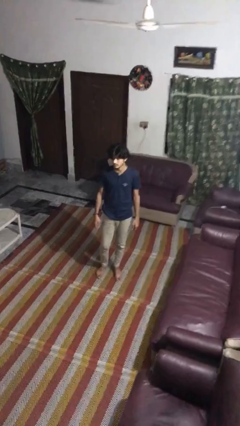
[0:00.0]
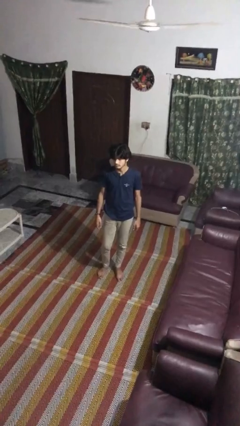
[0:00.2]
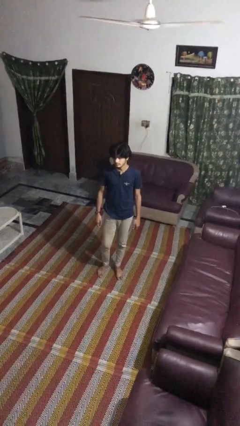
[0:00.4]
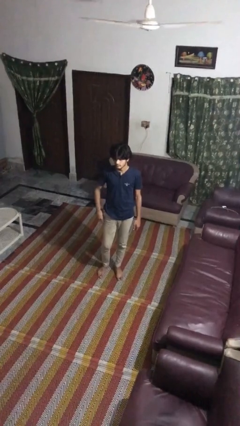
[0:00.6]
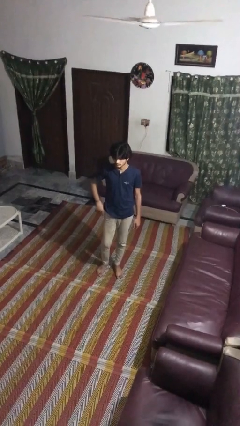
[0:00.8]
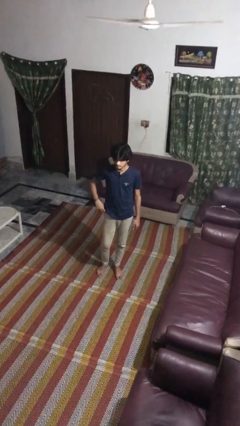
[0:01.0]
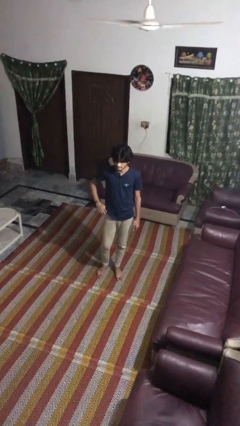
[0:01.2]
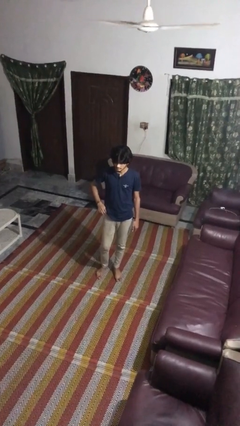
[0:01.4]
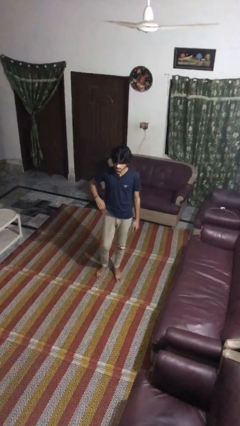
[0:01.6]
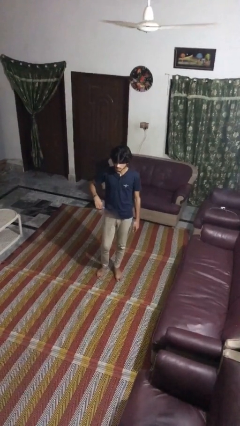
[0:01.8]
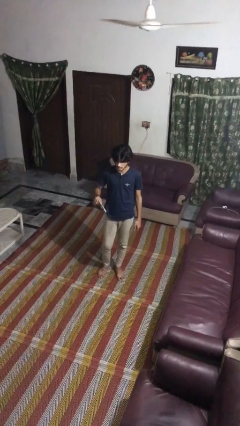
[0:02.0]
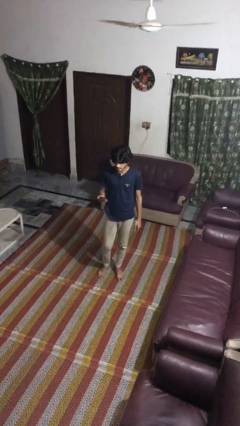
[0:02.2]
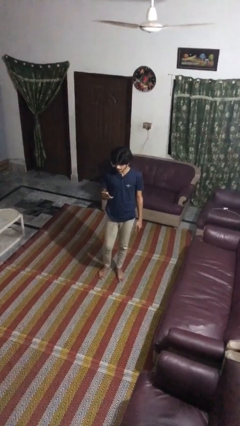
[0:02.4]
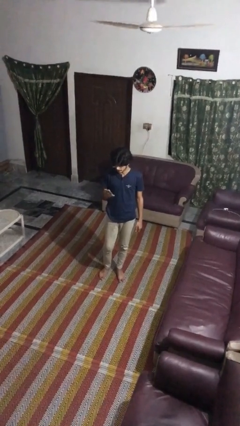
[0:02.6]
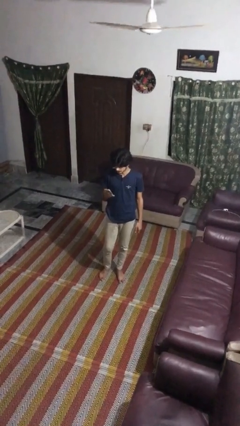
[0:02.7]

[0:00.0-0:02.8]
person takes phone from pocket

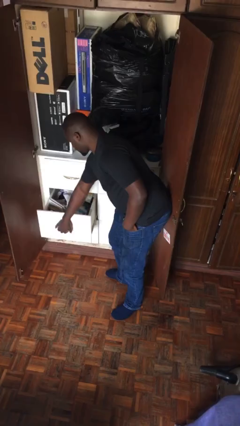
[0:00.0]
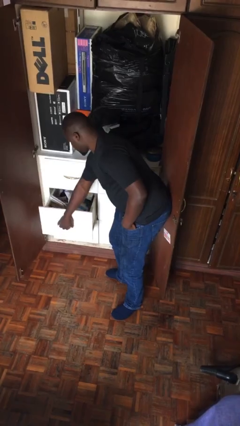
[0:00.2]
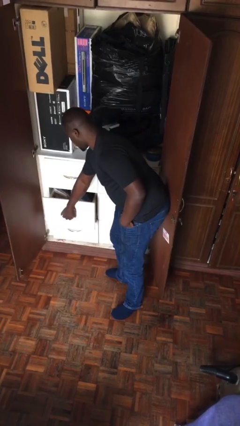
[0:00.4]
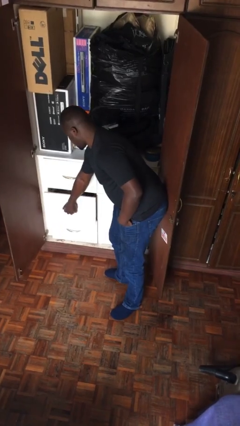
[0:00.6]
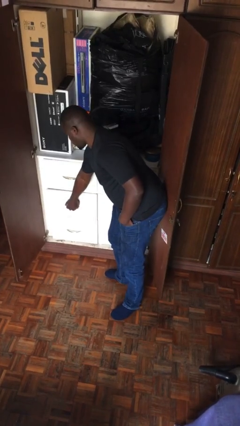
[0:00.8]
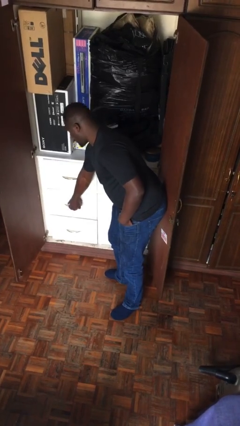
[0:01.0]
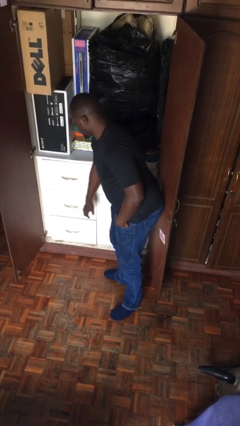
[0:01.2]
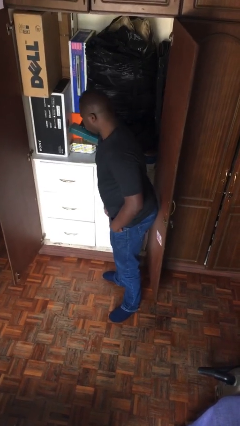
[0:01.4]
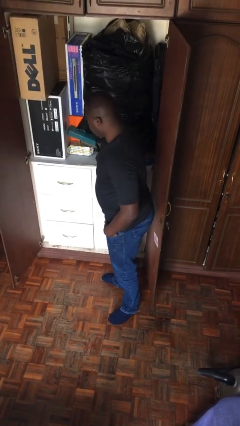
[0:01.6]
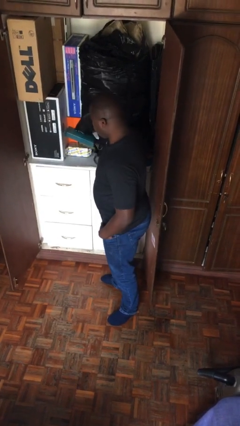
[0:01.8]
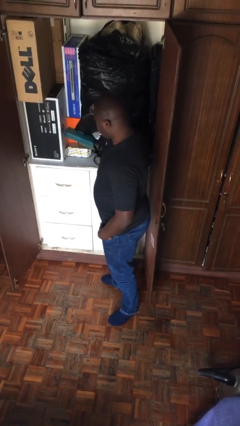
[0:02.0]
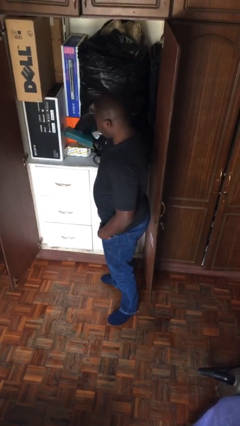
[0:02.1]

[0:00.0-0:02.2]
person closes dresser drawer

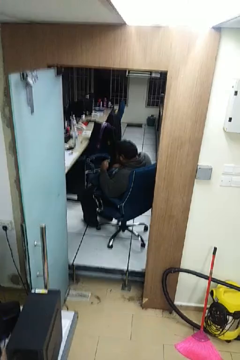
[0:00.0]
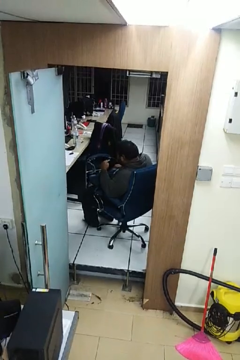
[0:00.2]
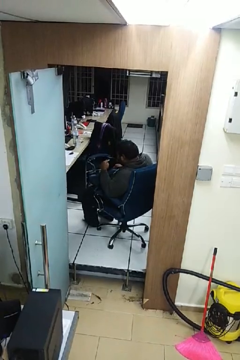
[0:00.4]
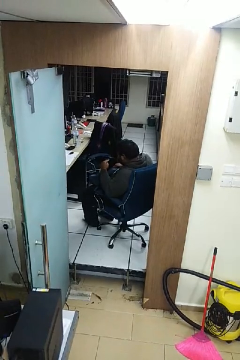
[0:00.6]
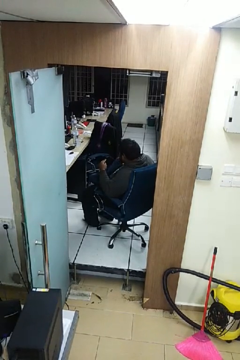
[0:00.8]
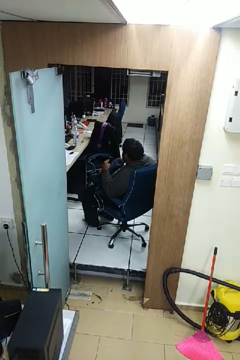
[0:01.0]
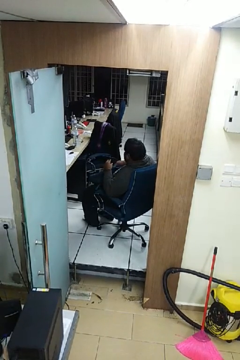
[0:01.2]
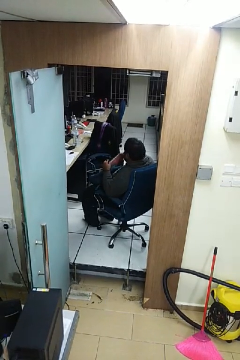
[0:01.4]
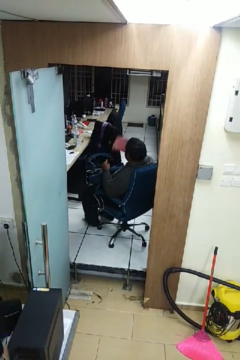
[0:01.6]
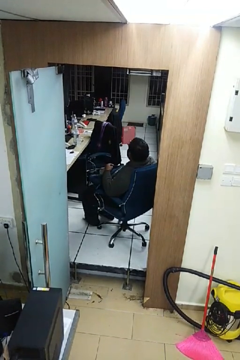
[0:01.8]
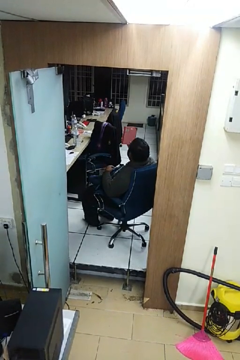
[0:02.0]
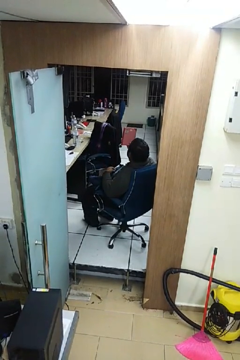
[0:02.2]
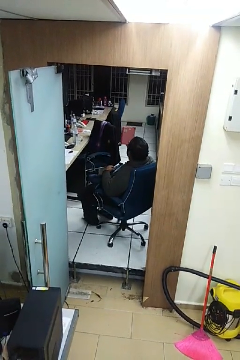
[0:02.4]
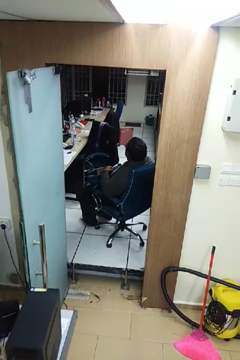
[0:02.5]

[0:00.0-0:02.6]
person takes object from backpack

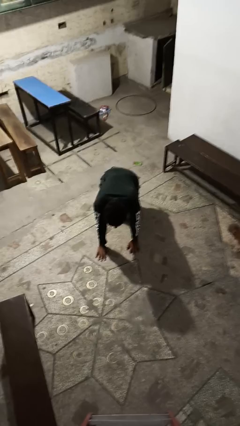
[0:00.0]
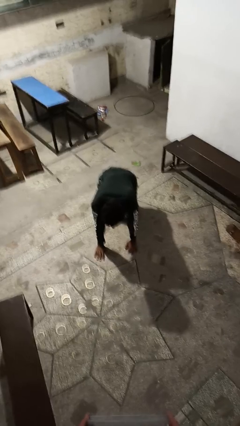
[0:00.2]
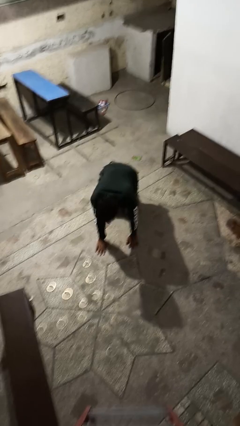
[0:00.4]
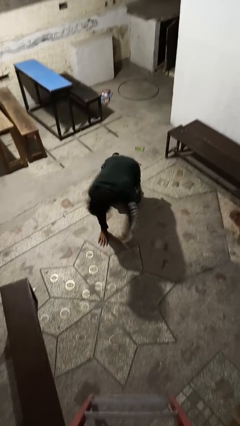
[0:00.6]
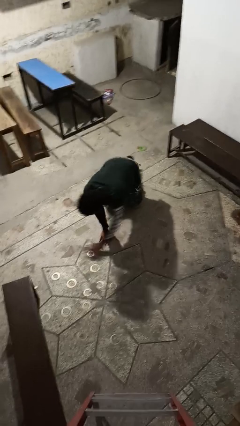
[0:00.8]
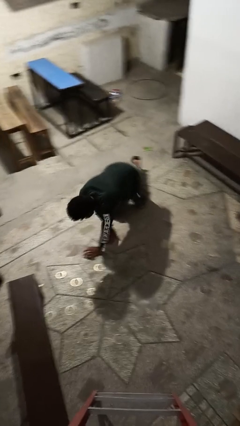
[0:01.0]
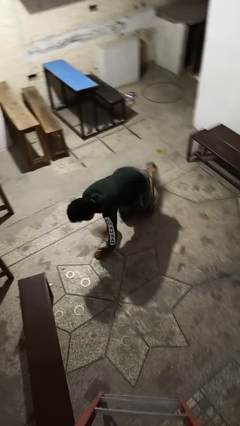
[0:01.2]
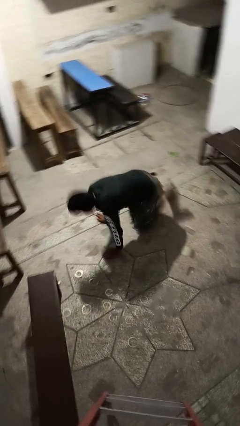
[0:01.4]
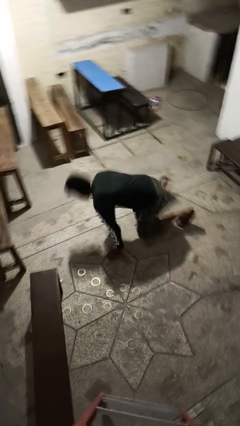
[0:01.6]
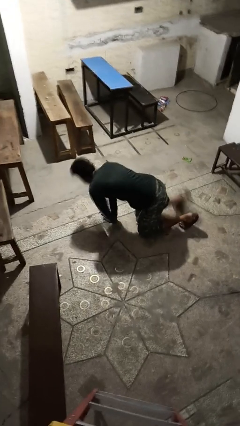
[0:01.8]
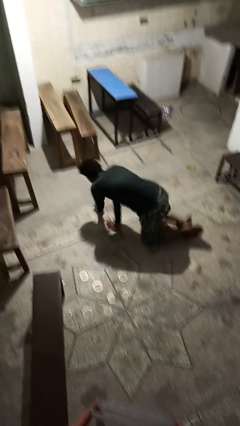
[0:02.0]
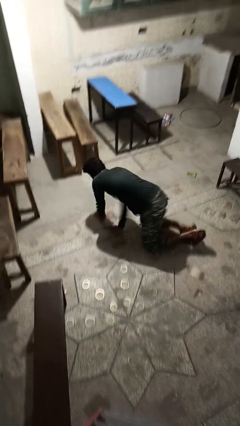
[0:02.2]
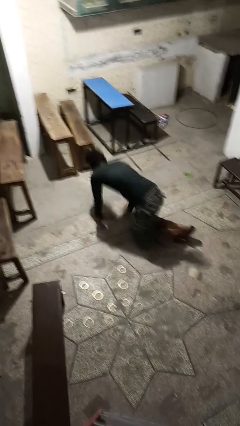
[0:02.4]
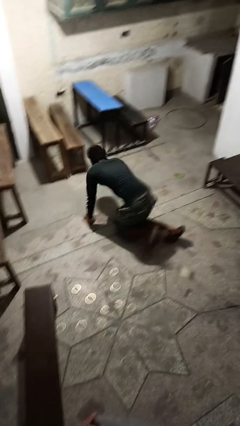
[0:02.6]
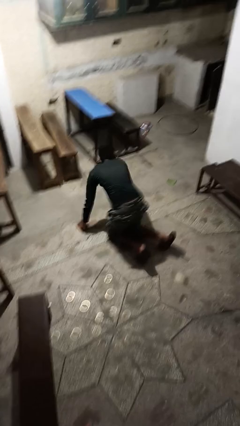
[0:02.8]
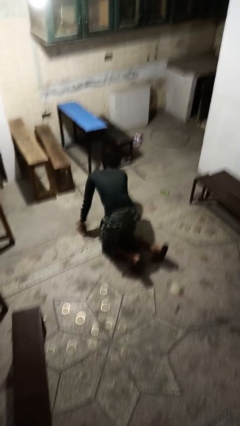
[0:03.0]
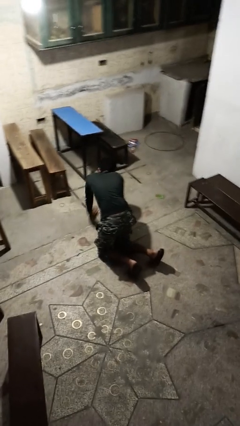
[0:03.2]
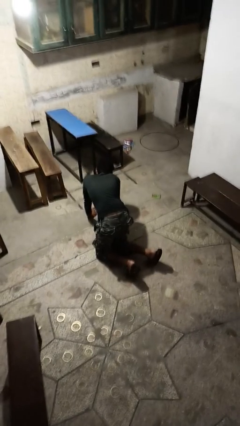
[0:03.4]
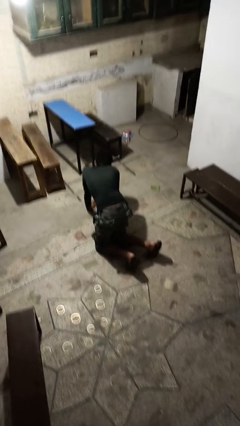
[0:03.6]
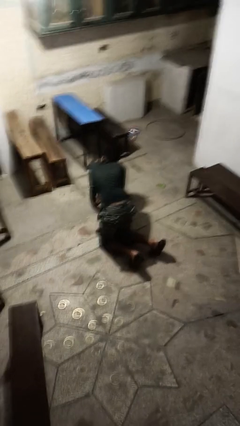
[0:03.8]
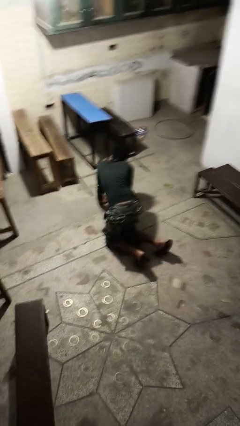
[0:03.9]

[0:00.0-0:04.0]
person crawls

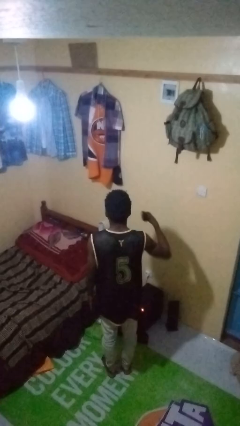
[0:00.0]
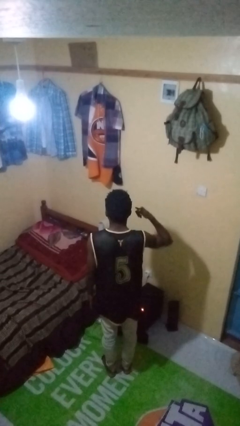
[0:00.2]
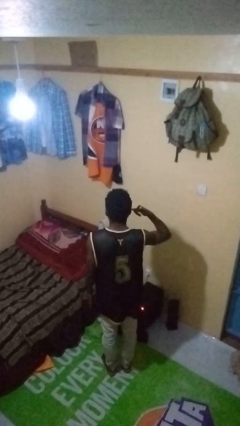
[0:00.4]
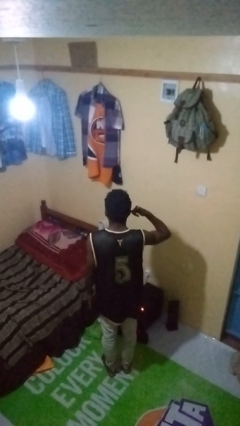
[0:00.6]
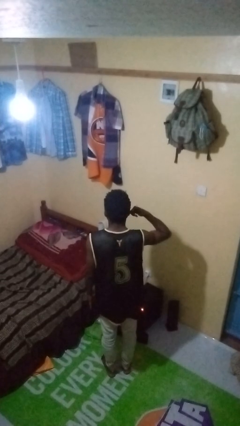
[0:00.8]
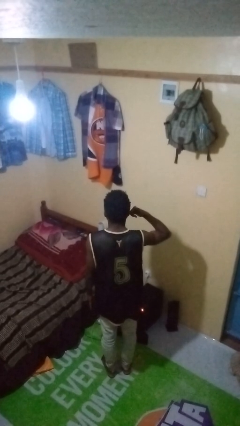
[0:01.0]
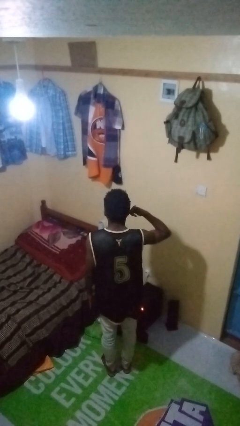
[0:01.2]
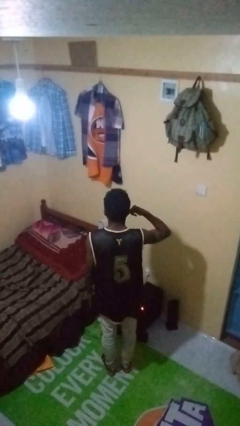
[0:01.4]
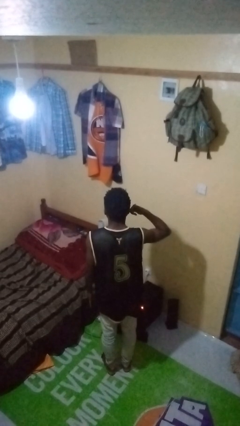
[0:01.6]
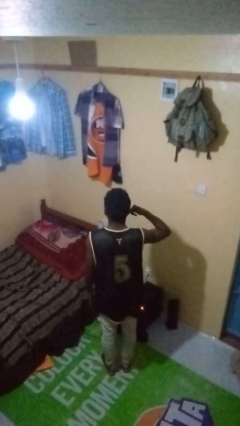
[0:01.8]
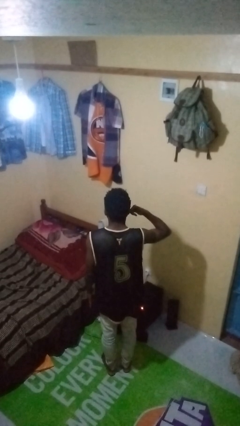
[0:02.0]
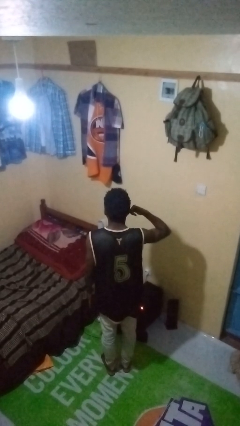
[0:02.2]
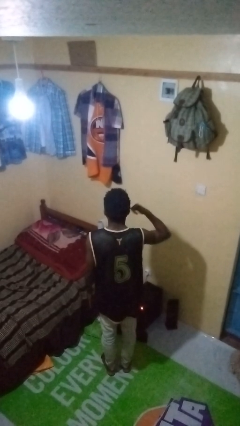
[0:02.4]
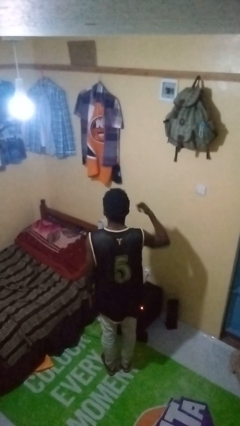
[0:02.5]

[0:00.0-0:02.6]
person gestures call me

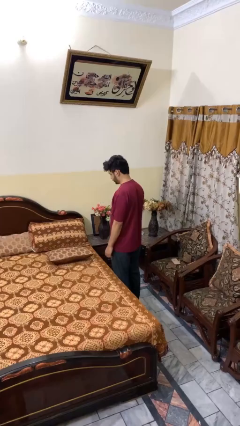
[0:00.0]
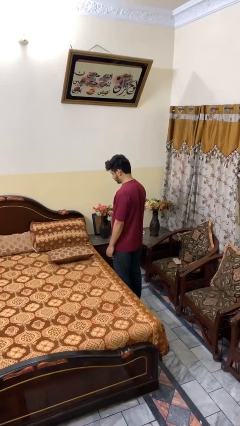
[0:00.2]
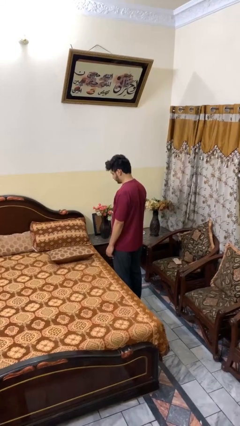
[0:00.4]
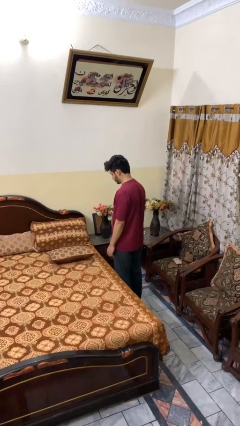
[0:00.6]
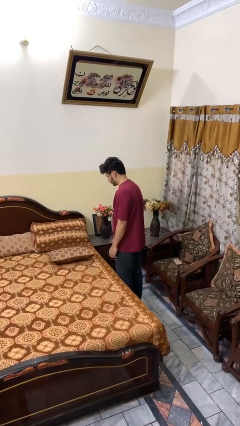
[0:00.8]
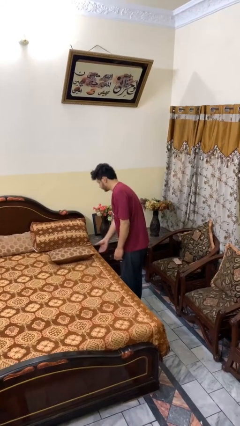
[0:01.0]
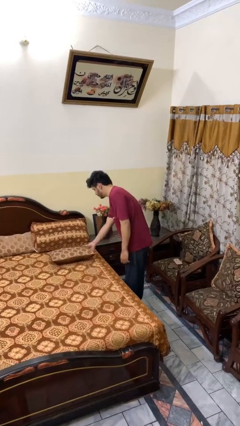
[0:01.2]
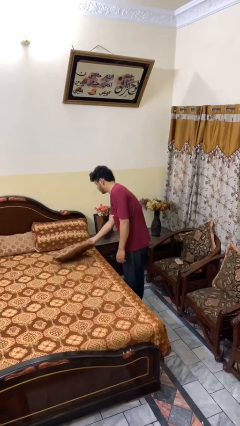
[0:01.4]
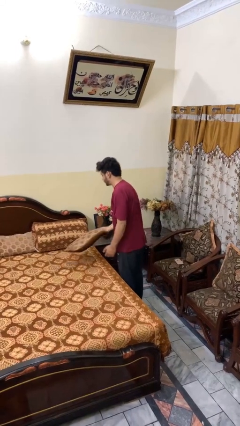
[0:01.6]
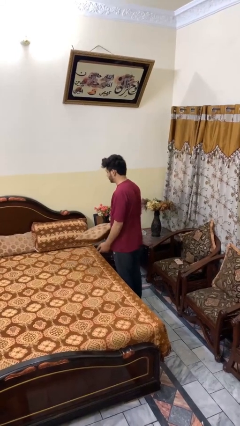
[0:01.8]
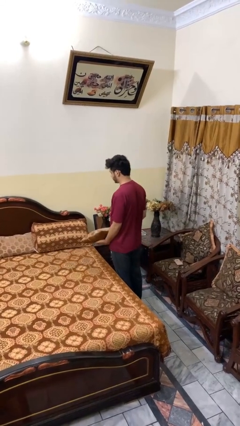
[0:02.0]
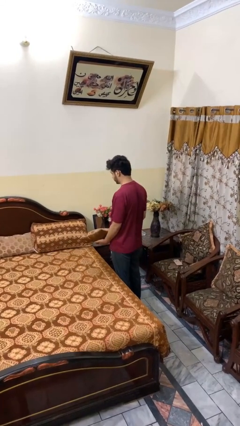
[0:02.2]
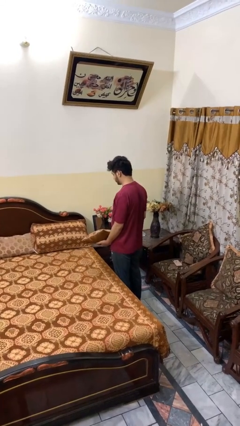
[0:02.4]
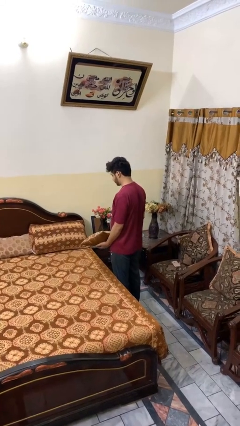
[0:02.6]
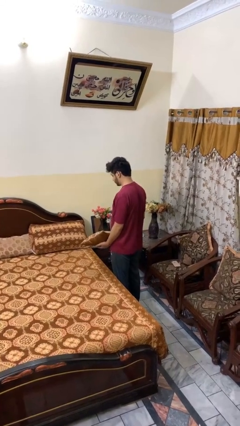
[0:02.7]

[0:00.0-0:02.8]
person picks up object from bed

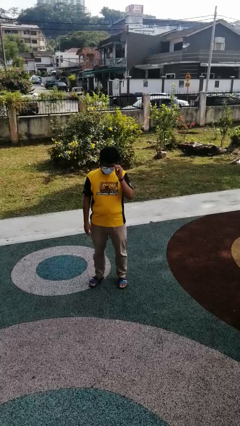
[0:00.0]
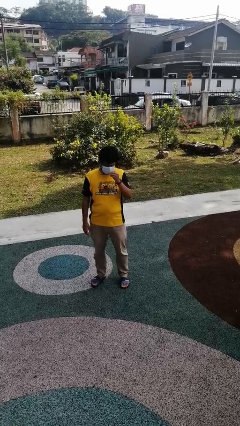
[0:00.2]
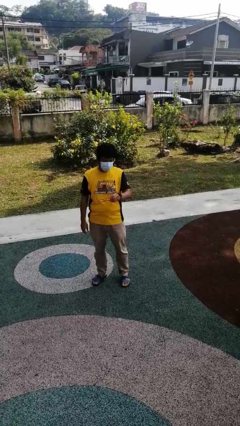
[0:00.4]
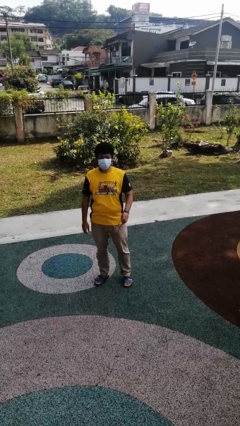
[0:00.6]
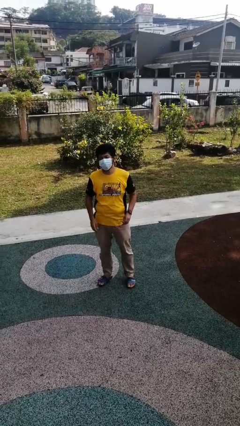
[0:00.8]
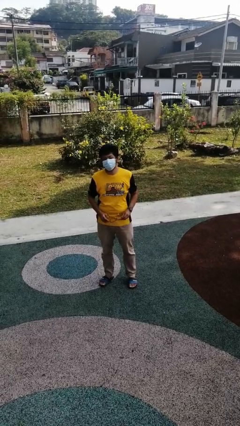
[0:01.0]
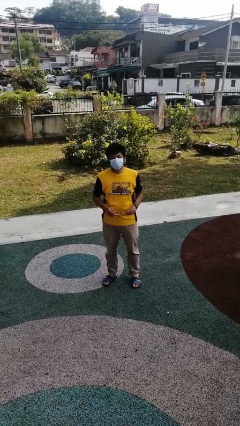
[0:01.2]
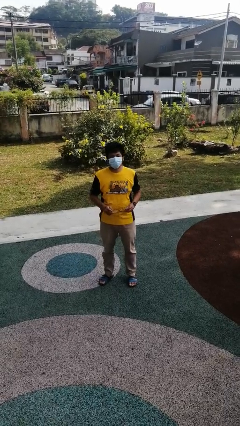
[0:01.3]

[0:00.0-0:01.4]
person takes off glasses
